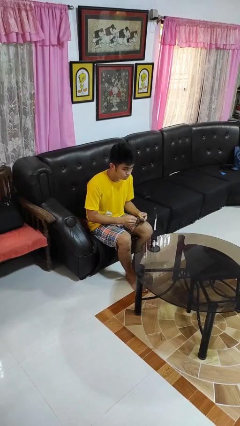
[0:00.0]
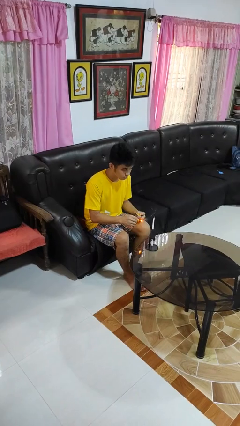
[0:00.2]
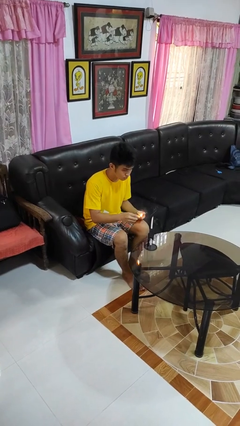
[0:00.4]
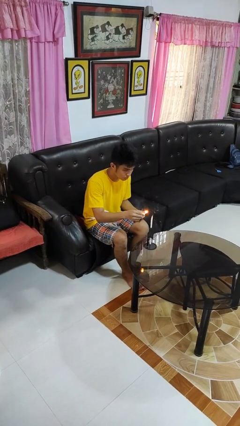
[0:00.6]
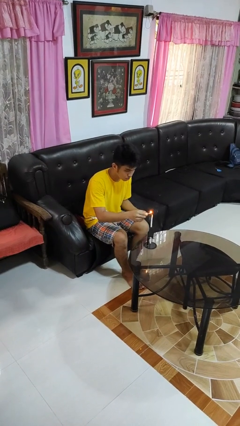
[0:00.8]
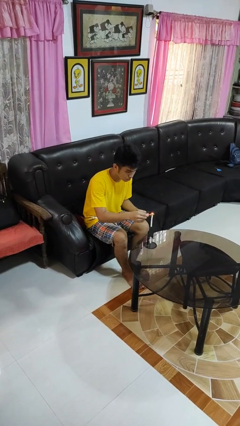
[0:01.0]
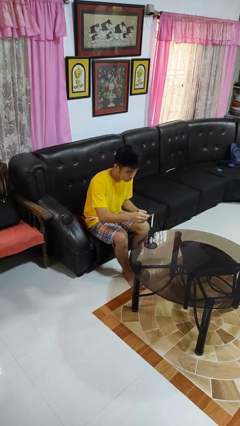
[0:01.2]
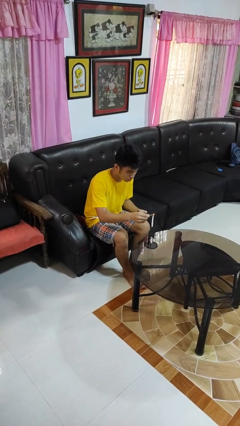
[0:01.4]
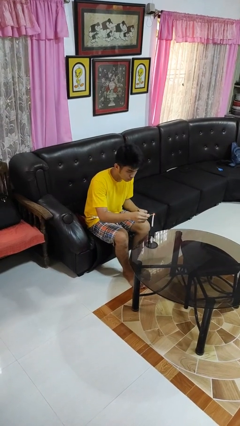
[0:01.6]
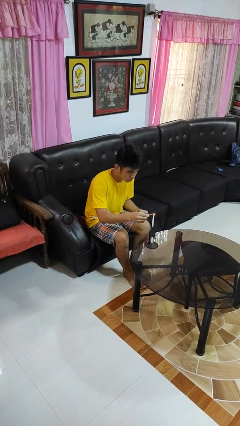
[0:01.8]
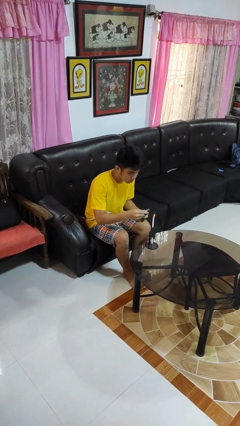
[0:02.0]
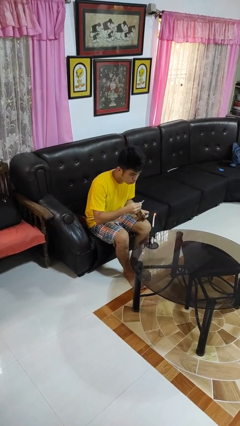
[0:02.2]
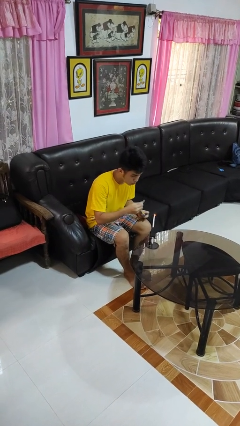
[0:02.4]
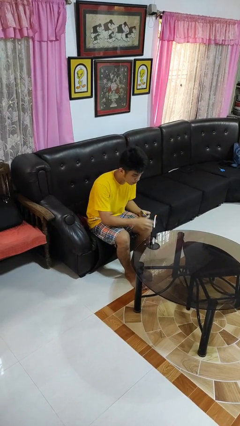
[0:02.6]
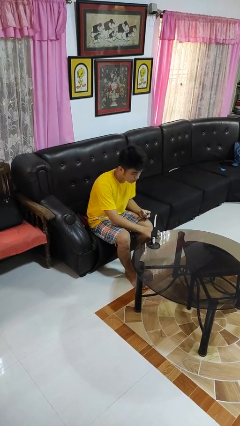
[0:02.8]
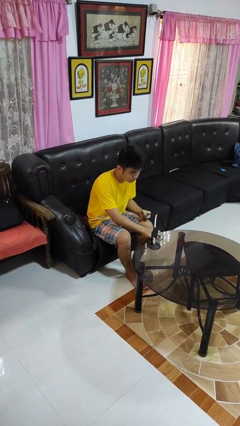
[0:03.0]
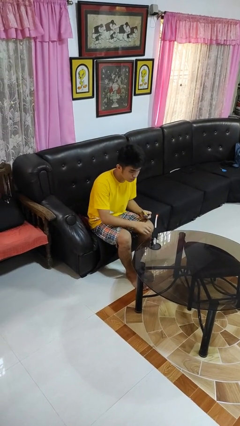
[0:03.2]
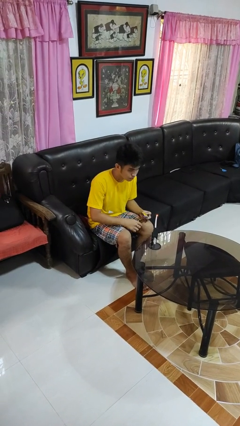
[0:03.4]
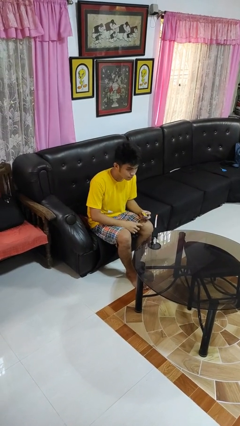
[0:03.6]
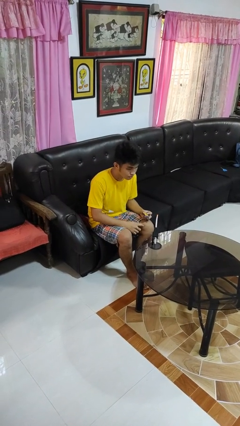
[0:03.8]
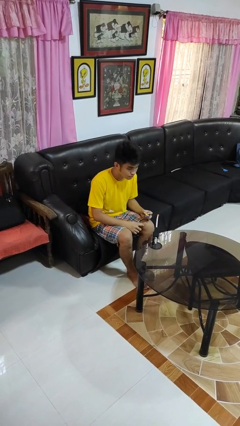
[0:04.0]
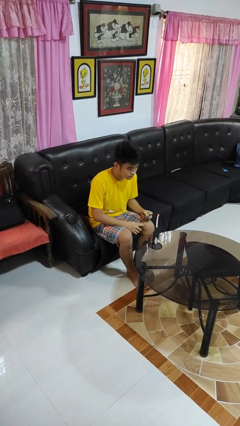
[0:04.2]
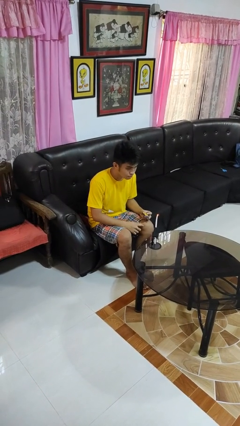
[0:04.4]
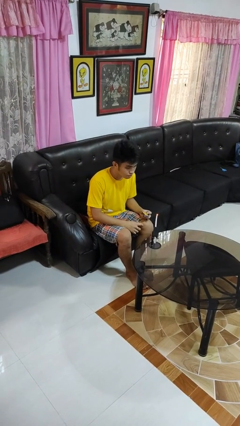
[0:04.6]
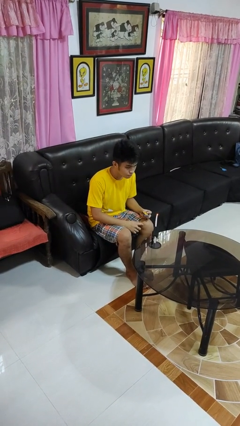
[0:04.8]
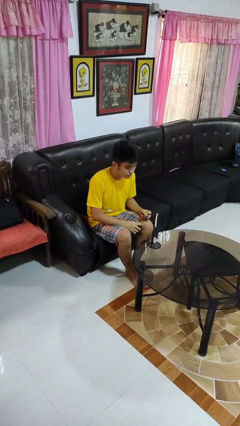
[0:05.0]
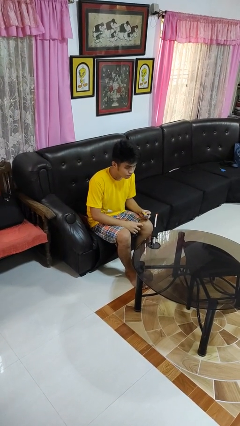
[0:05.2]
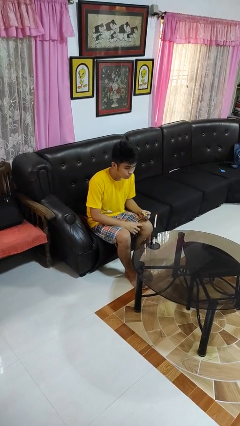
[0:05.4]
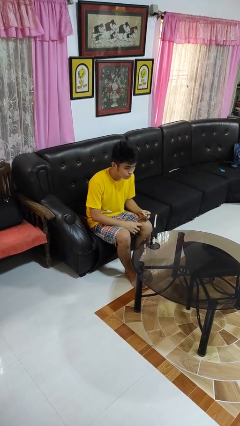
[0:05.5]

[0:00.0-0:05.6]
person lights candle

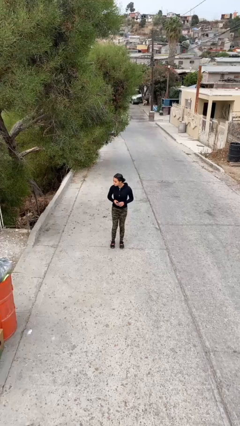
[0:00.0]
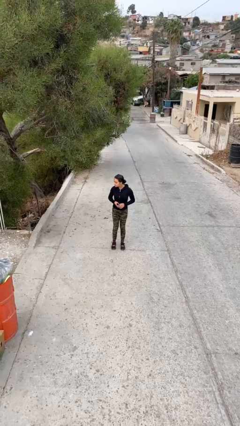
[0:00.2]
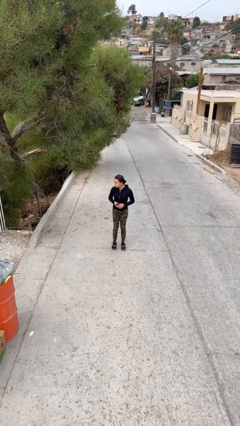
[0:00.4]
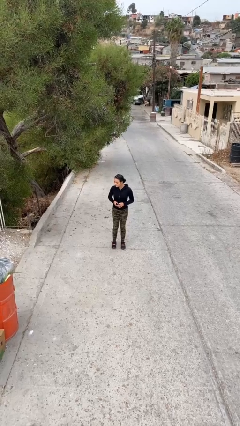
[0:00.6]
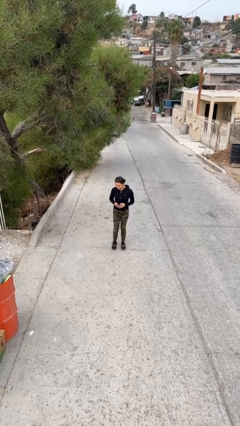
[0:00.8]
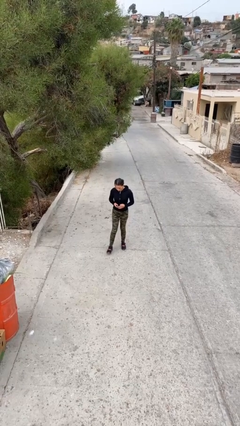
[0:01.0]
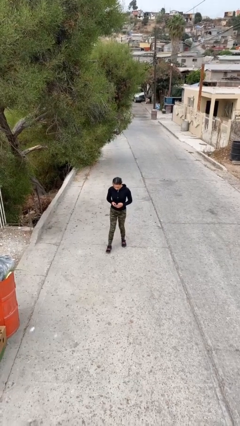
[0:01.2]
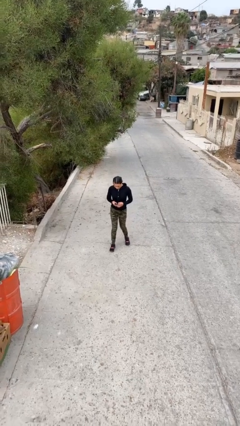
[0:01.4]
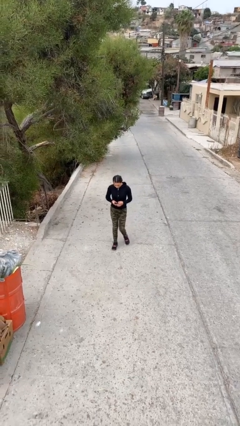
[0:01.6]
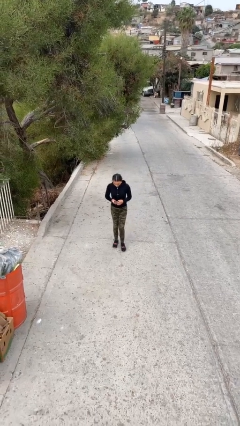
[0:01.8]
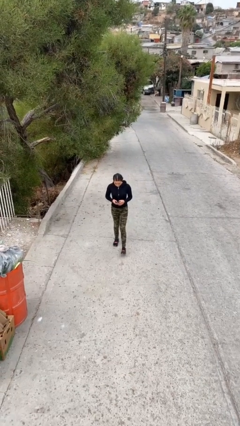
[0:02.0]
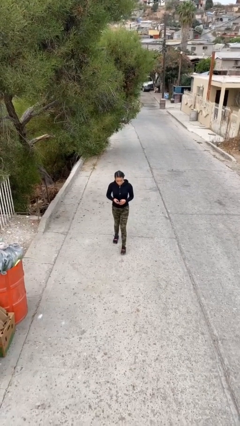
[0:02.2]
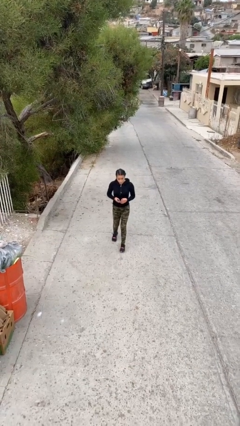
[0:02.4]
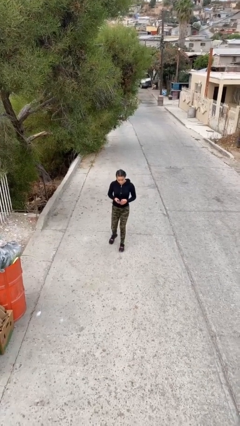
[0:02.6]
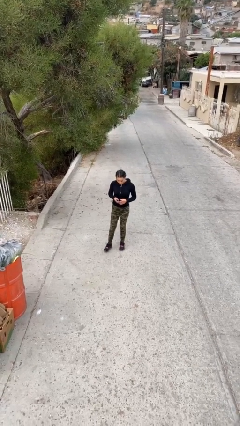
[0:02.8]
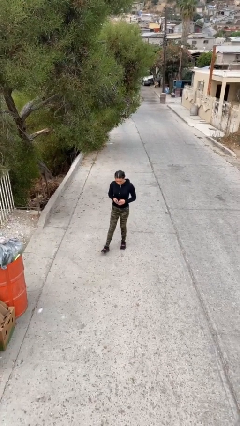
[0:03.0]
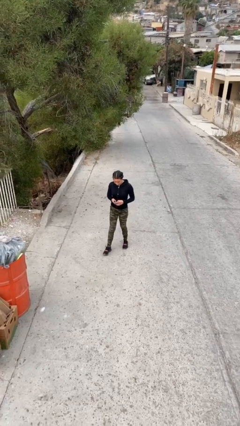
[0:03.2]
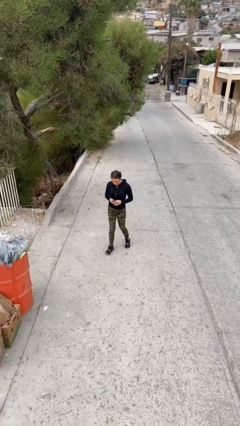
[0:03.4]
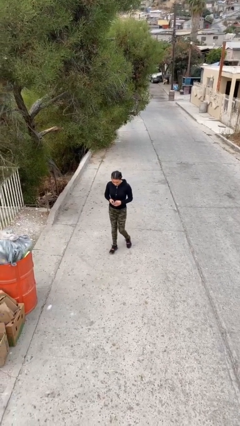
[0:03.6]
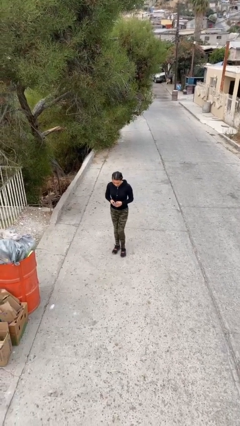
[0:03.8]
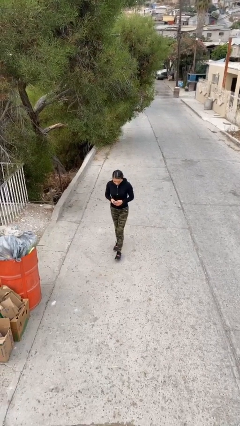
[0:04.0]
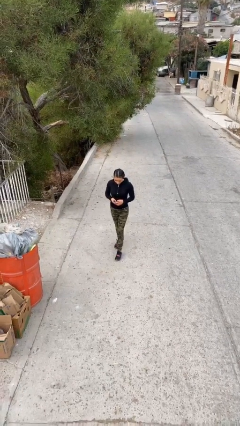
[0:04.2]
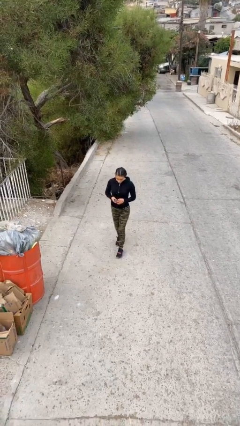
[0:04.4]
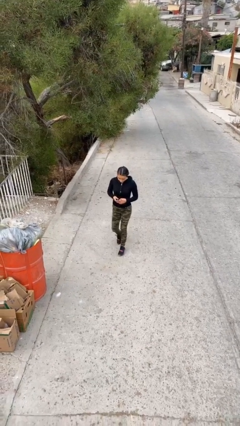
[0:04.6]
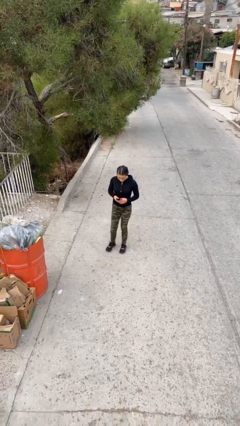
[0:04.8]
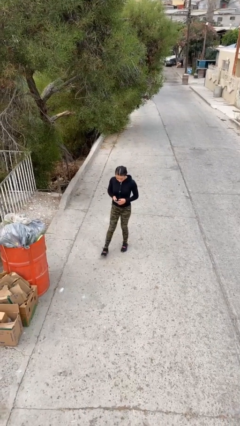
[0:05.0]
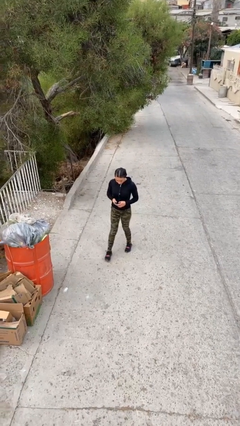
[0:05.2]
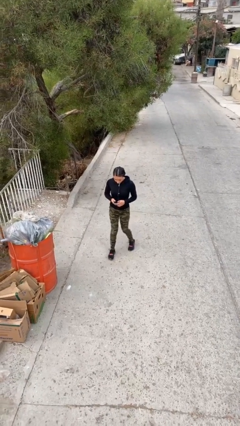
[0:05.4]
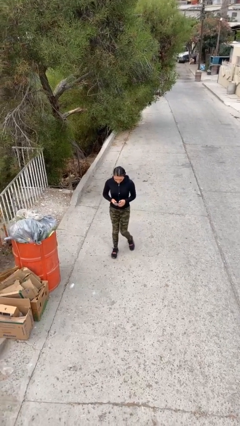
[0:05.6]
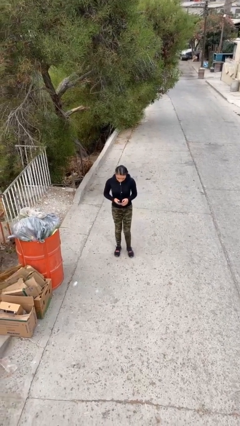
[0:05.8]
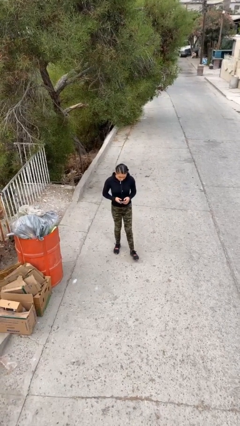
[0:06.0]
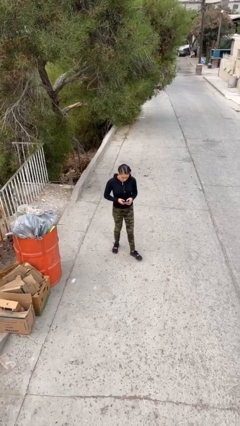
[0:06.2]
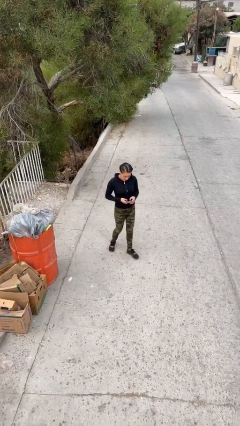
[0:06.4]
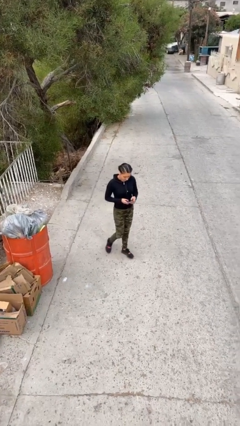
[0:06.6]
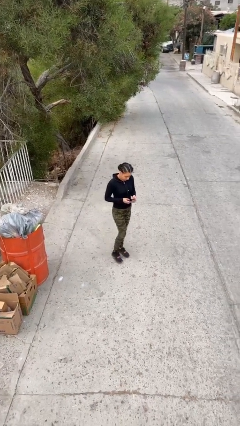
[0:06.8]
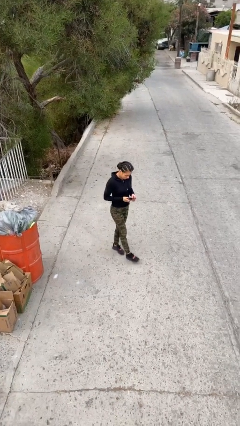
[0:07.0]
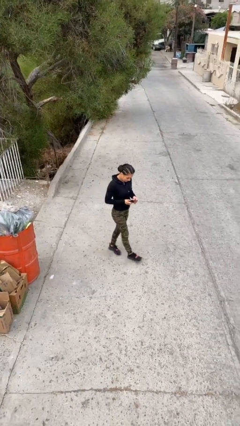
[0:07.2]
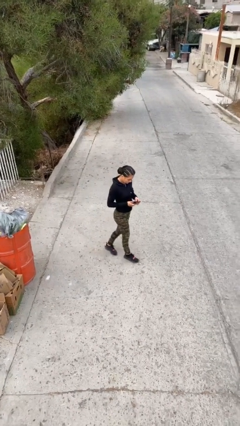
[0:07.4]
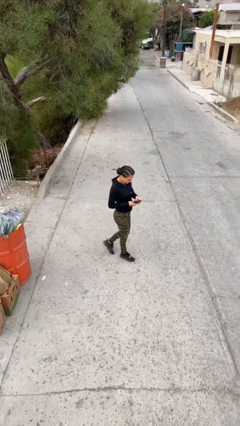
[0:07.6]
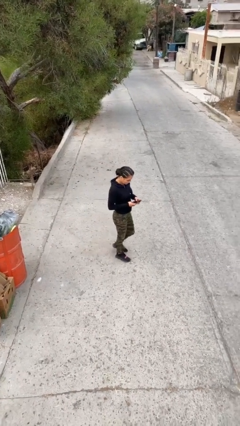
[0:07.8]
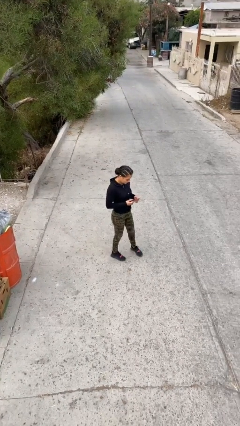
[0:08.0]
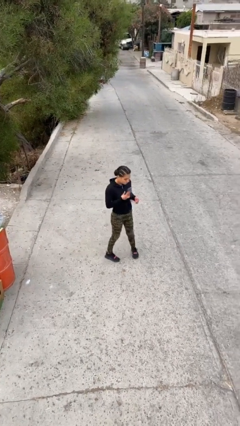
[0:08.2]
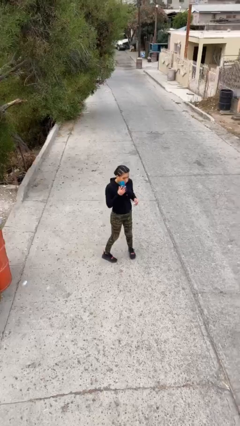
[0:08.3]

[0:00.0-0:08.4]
person texts on phone

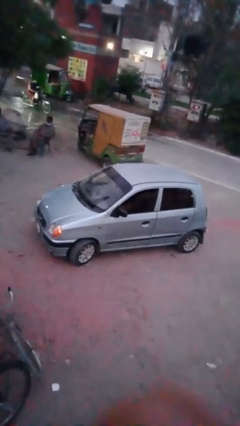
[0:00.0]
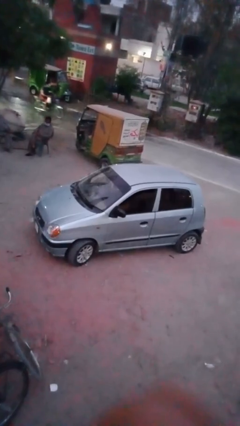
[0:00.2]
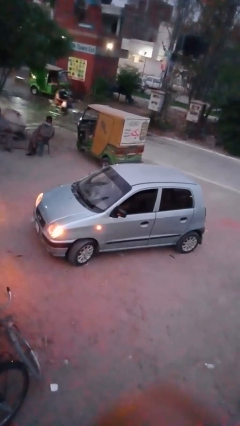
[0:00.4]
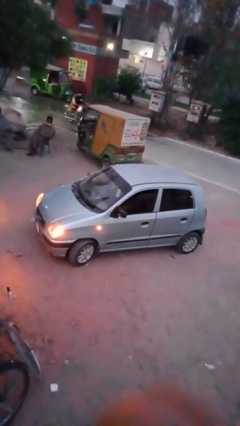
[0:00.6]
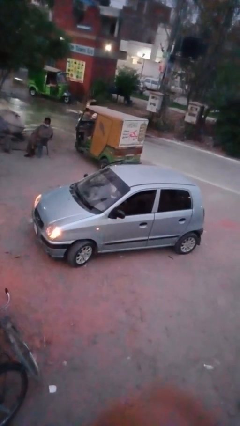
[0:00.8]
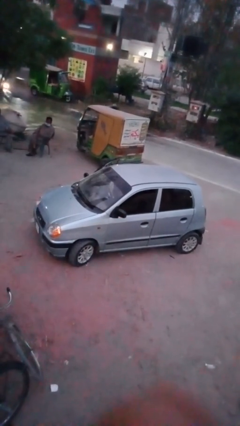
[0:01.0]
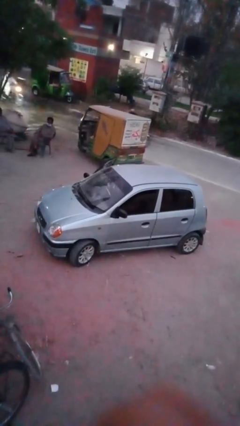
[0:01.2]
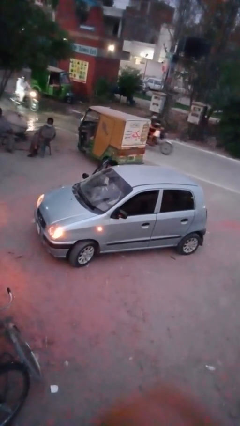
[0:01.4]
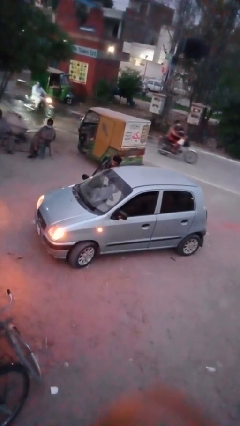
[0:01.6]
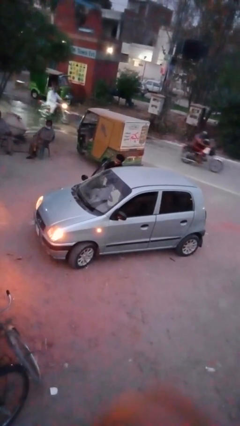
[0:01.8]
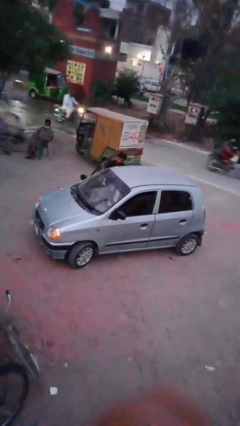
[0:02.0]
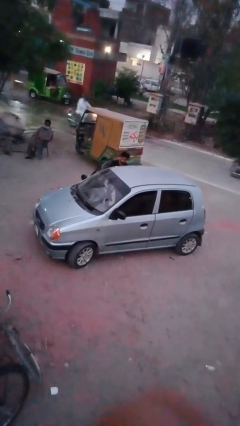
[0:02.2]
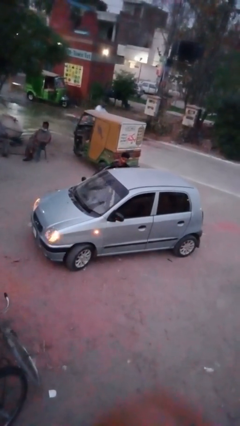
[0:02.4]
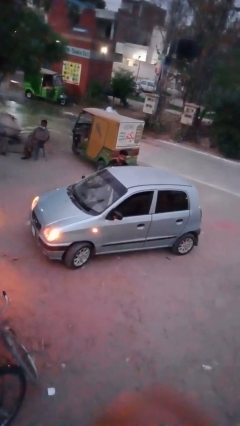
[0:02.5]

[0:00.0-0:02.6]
car drops off person

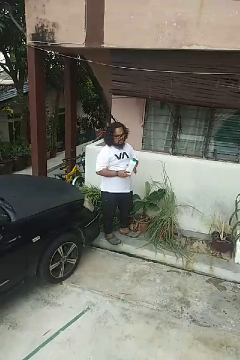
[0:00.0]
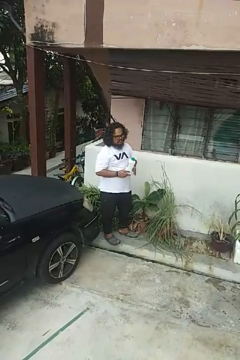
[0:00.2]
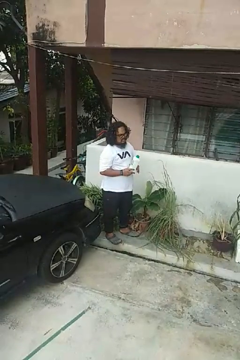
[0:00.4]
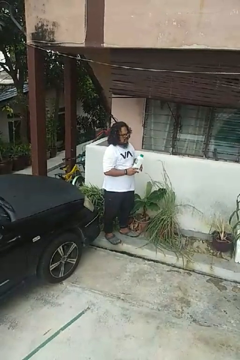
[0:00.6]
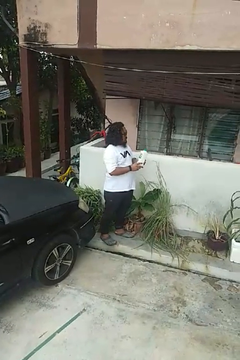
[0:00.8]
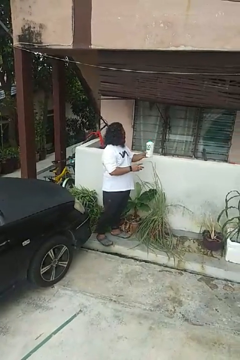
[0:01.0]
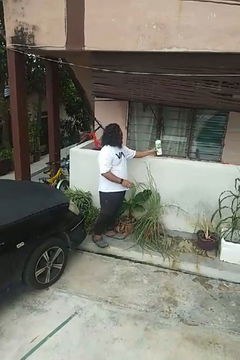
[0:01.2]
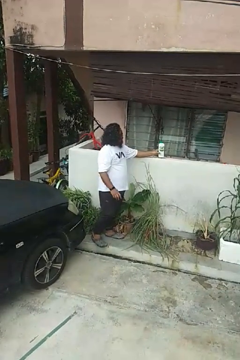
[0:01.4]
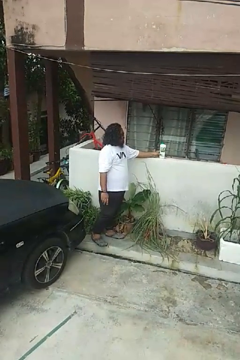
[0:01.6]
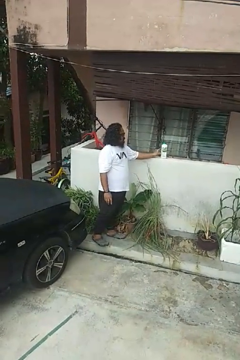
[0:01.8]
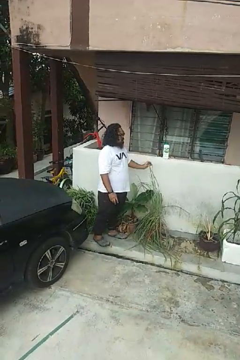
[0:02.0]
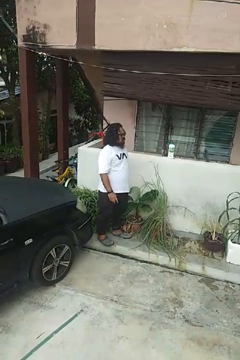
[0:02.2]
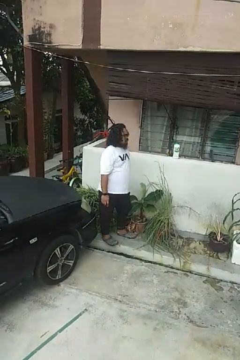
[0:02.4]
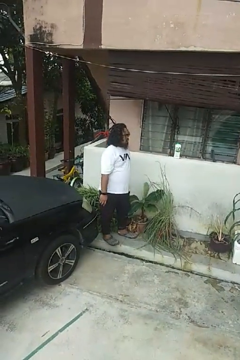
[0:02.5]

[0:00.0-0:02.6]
person puts down object on countertop
